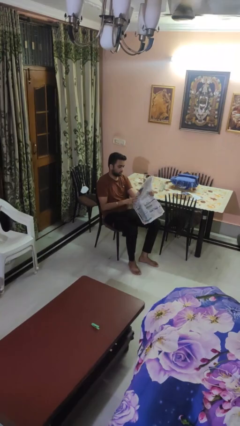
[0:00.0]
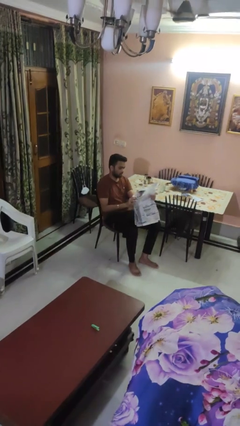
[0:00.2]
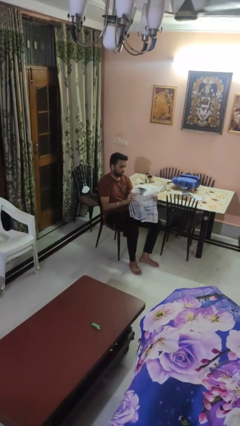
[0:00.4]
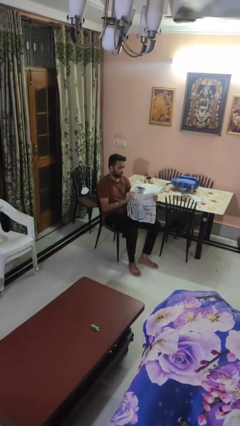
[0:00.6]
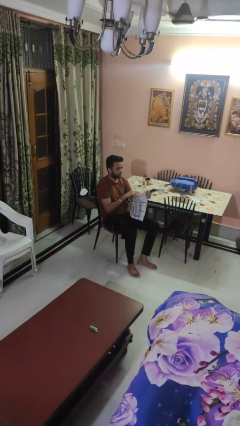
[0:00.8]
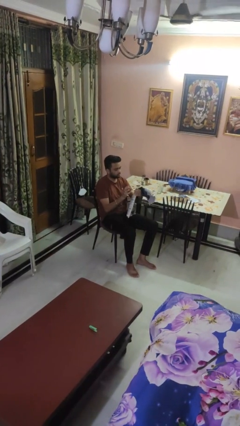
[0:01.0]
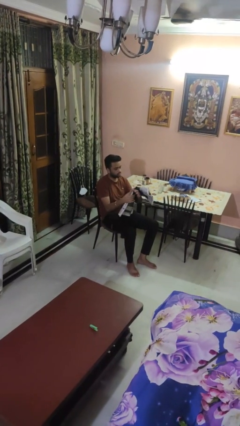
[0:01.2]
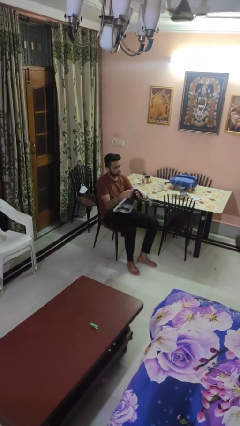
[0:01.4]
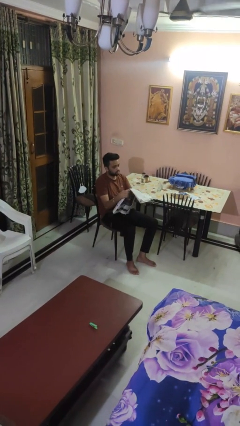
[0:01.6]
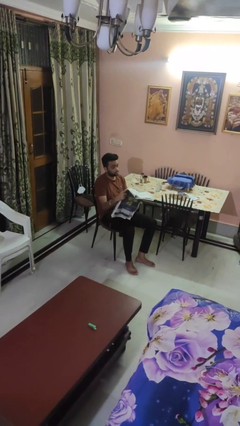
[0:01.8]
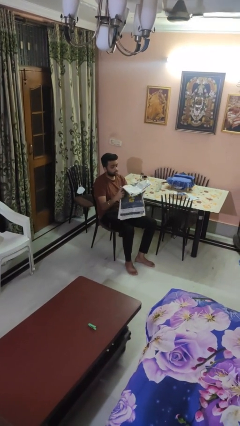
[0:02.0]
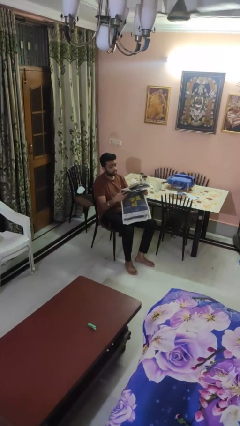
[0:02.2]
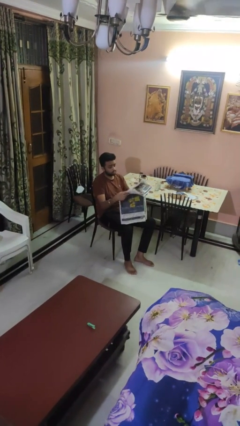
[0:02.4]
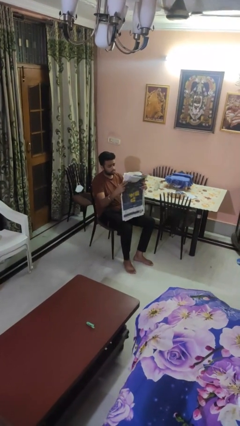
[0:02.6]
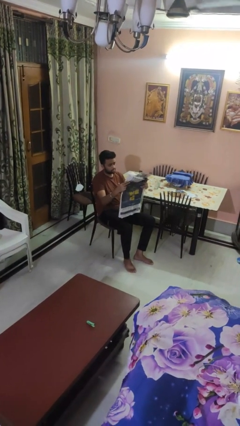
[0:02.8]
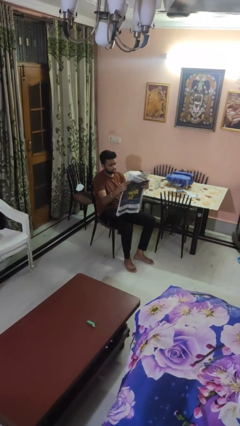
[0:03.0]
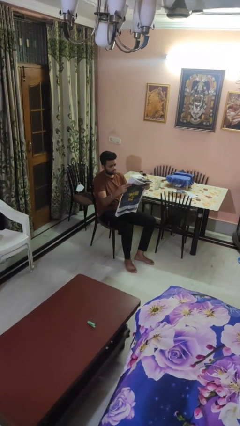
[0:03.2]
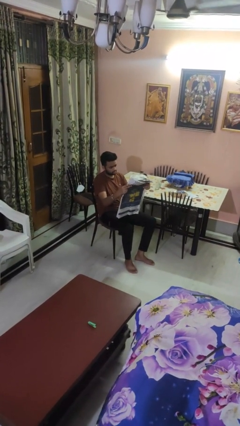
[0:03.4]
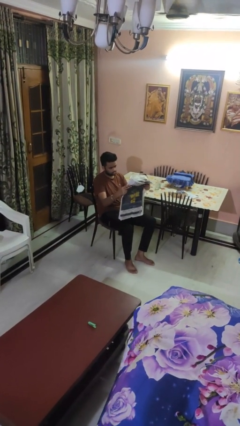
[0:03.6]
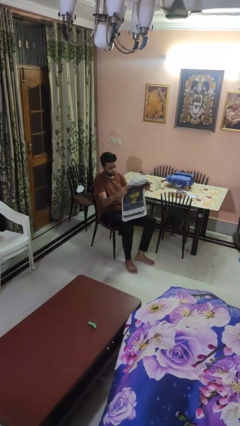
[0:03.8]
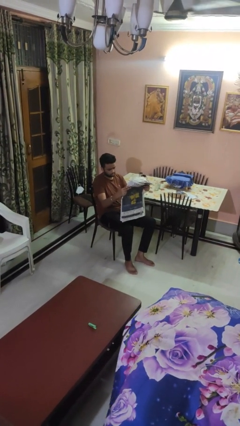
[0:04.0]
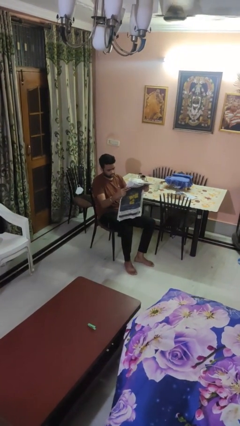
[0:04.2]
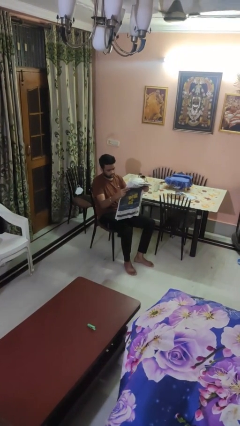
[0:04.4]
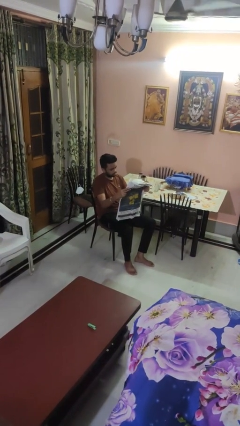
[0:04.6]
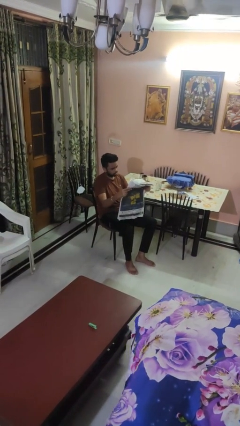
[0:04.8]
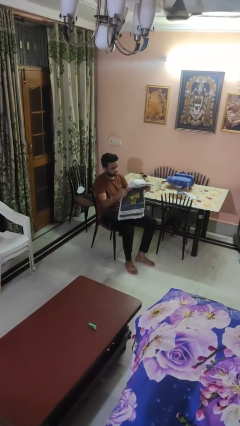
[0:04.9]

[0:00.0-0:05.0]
person reads newspaper

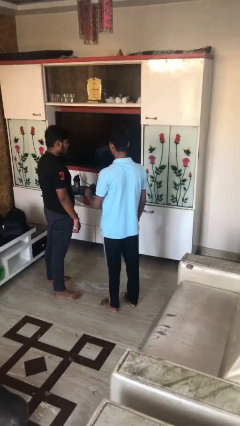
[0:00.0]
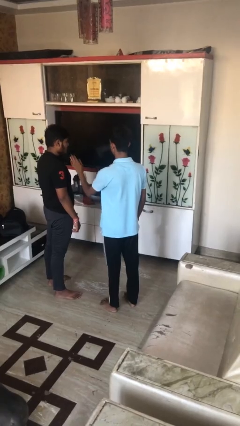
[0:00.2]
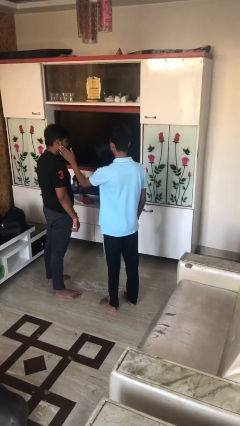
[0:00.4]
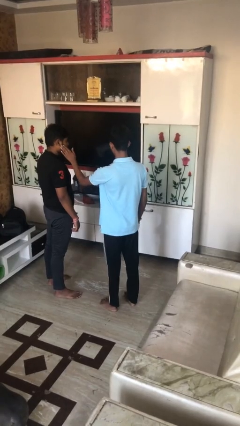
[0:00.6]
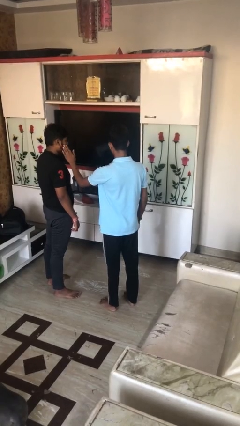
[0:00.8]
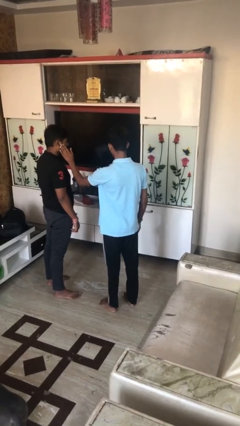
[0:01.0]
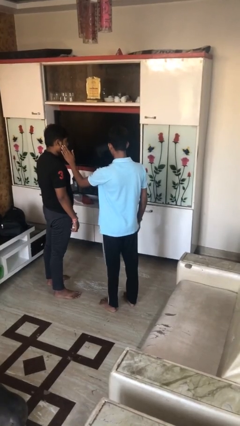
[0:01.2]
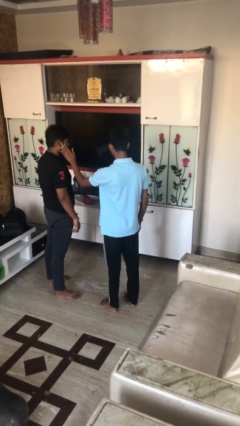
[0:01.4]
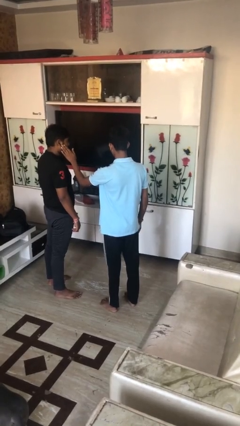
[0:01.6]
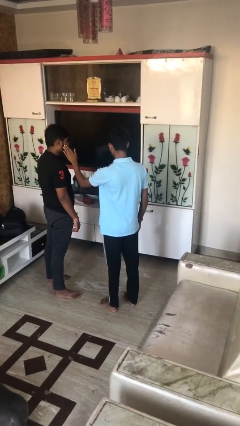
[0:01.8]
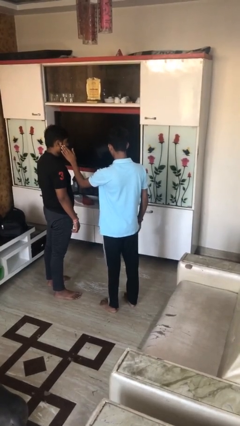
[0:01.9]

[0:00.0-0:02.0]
person touches face of person

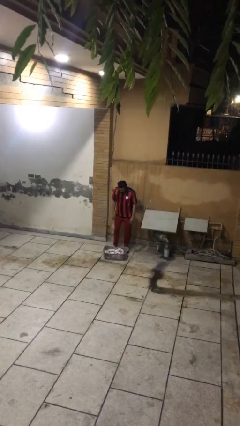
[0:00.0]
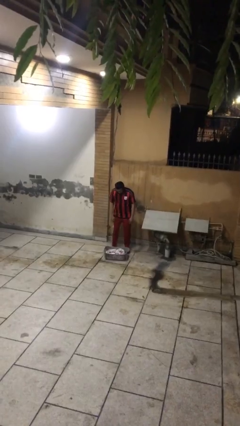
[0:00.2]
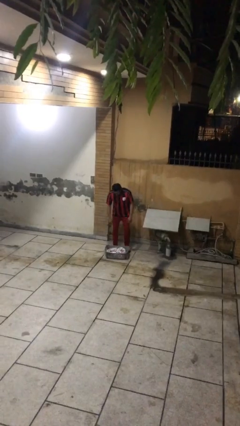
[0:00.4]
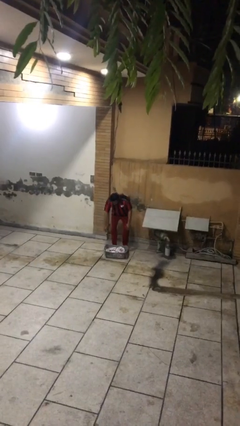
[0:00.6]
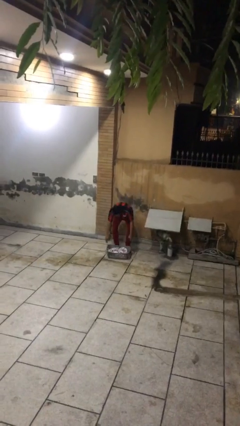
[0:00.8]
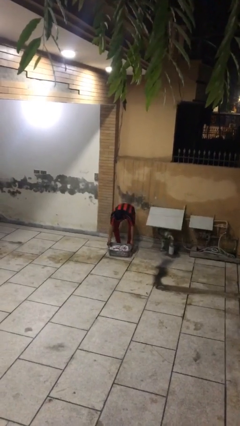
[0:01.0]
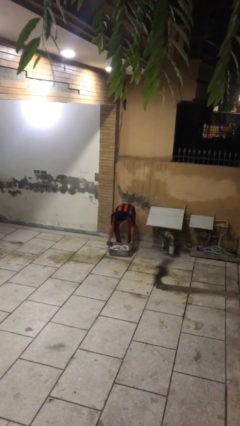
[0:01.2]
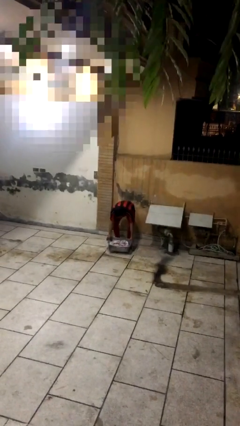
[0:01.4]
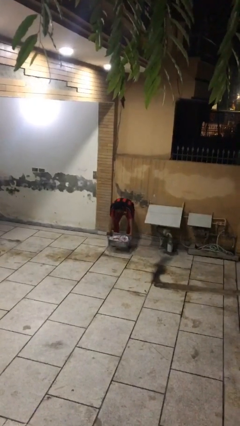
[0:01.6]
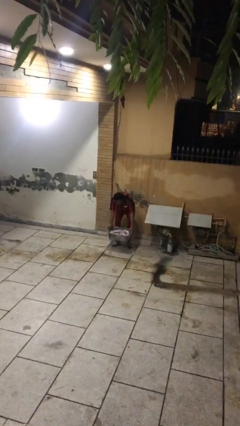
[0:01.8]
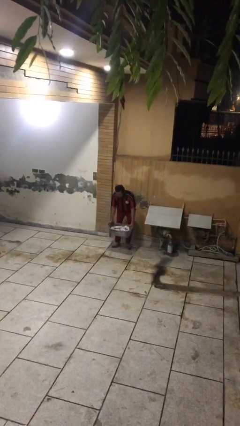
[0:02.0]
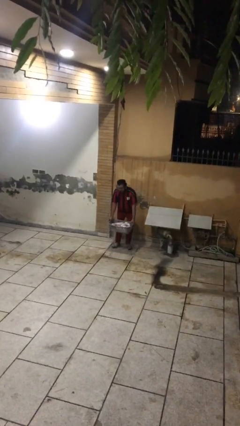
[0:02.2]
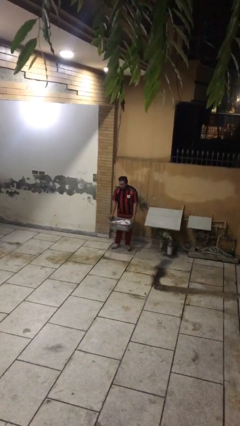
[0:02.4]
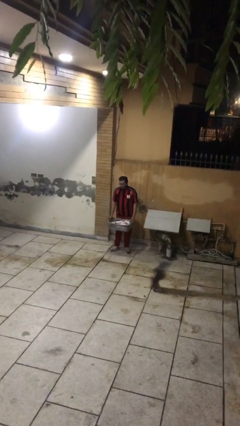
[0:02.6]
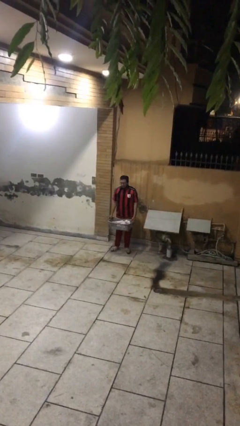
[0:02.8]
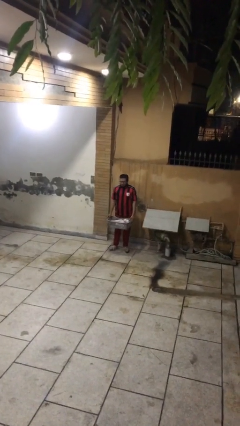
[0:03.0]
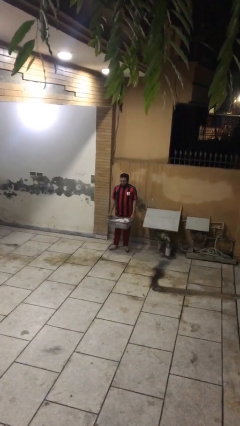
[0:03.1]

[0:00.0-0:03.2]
person picks up object from floor

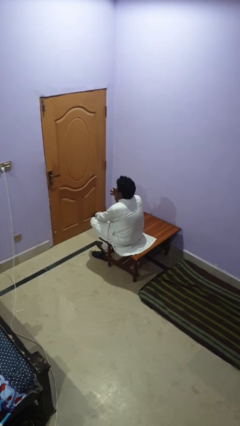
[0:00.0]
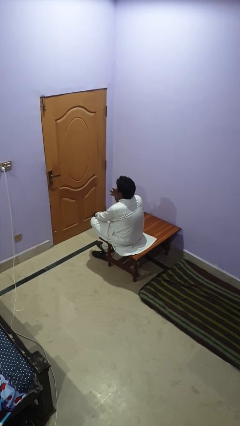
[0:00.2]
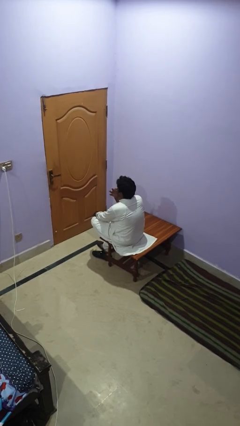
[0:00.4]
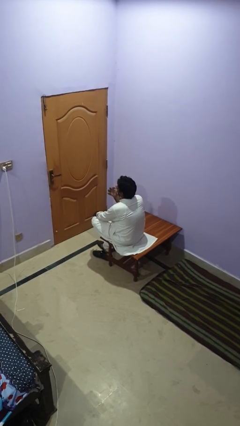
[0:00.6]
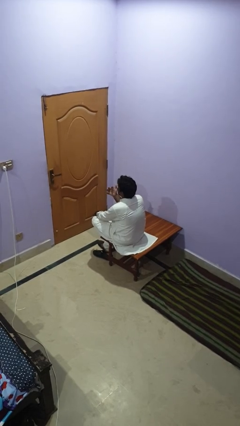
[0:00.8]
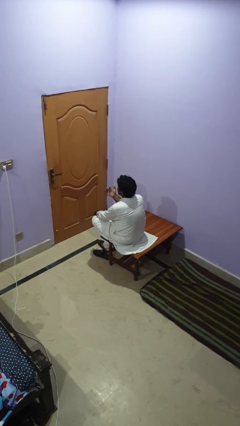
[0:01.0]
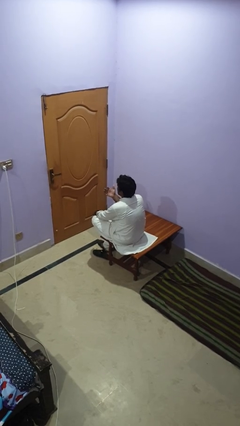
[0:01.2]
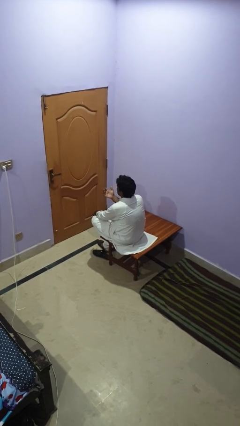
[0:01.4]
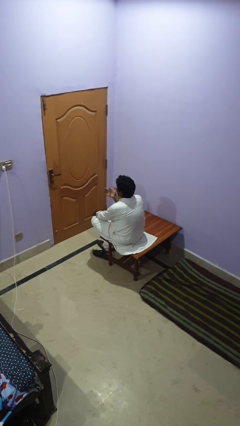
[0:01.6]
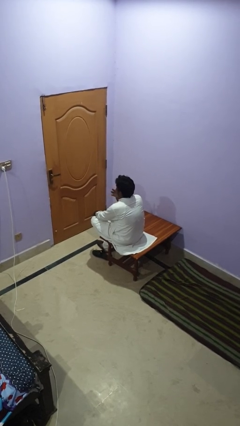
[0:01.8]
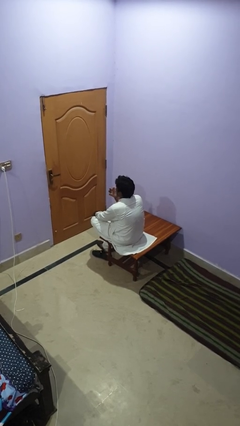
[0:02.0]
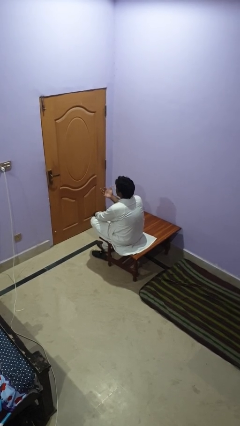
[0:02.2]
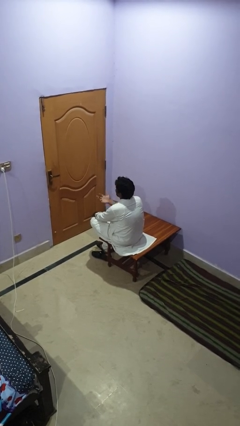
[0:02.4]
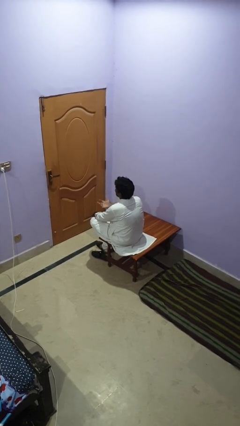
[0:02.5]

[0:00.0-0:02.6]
person licks fingers

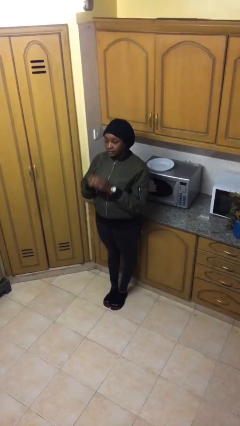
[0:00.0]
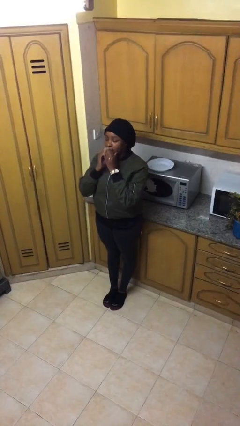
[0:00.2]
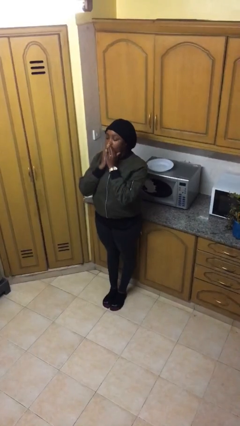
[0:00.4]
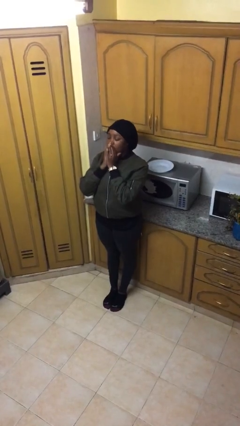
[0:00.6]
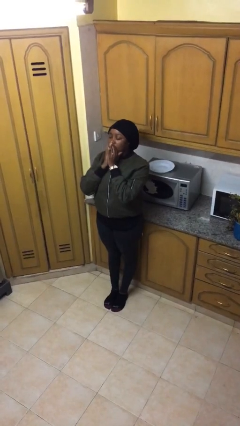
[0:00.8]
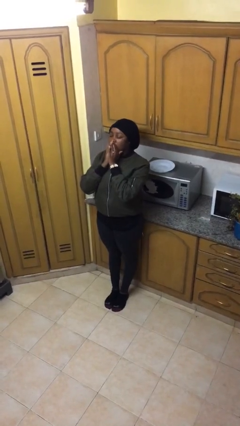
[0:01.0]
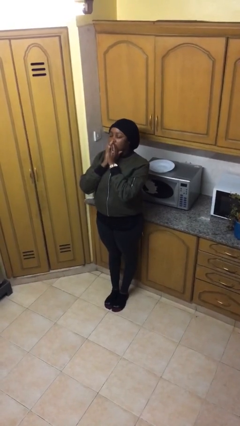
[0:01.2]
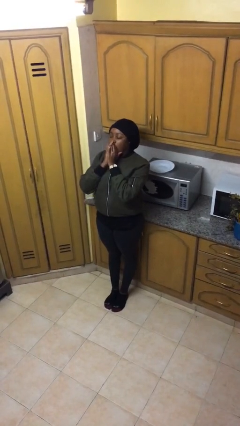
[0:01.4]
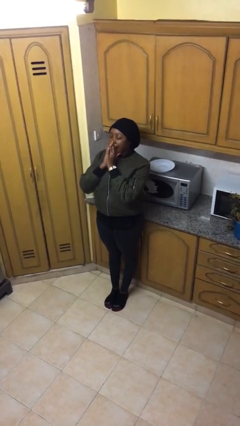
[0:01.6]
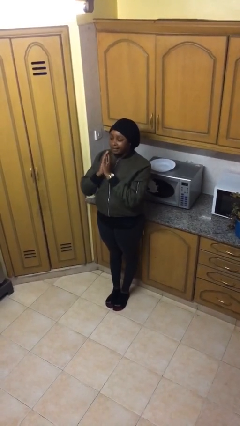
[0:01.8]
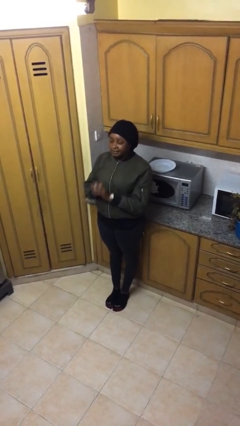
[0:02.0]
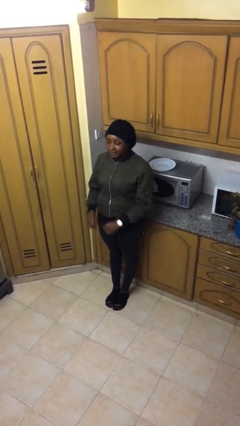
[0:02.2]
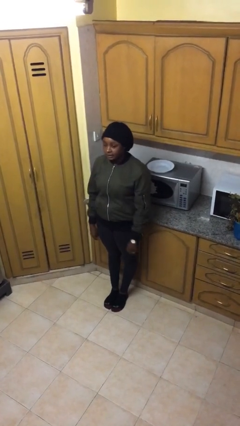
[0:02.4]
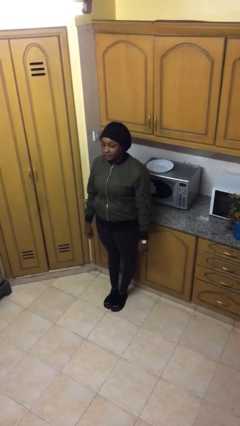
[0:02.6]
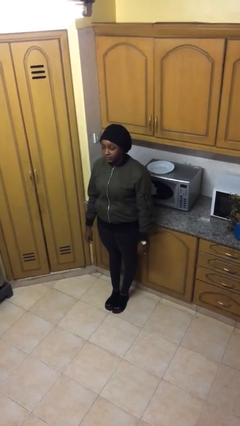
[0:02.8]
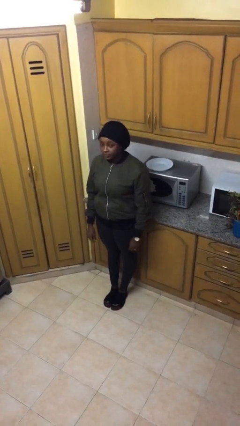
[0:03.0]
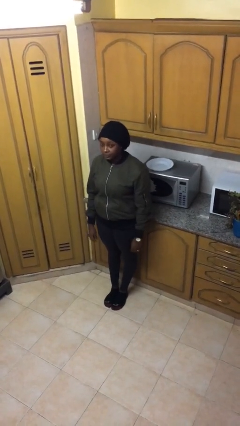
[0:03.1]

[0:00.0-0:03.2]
person yawns

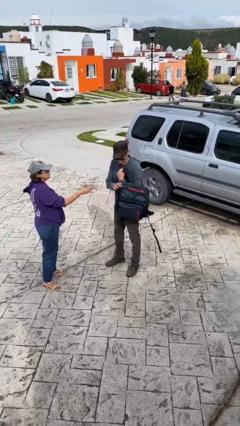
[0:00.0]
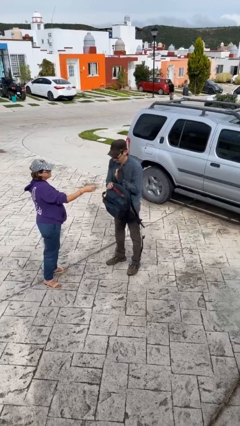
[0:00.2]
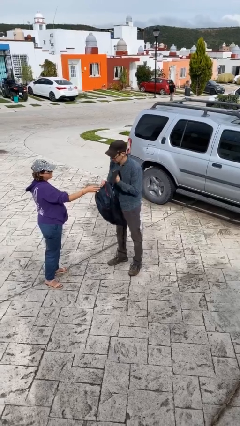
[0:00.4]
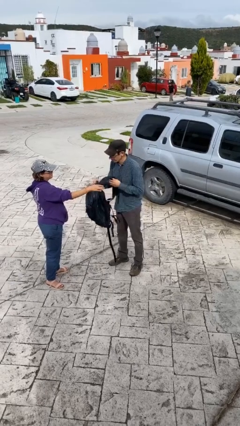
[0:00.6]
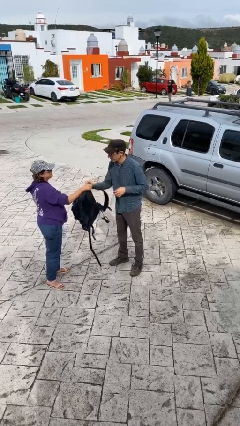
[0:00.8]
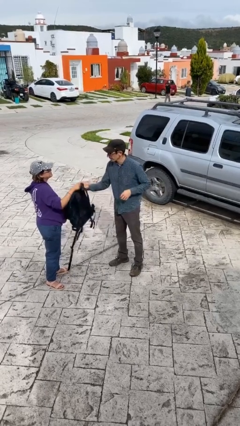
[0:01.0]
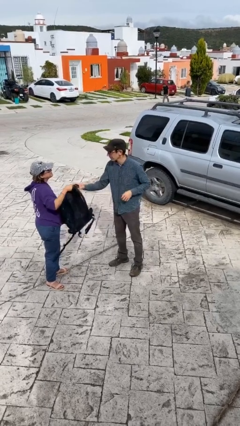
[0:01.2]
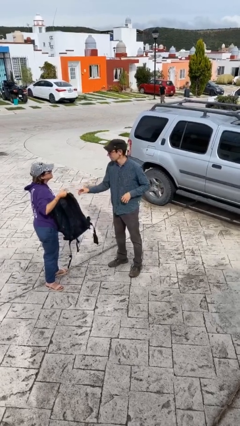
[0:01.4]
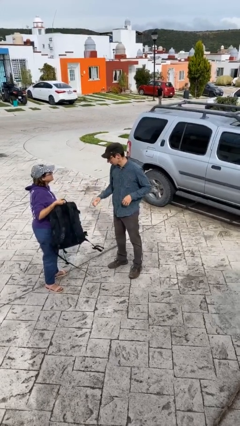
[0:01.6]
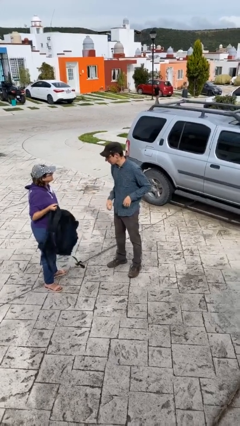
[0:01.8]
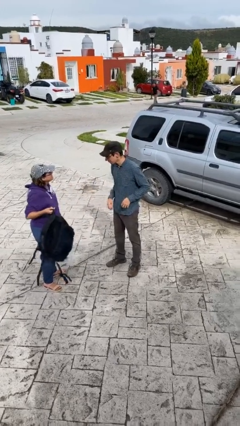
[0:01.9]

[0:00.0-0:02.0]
person transfers object to person
